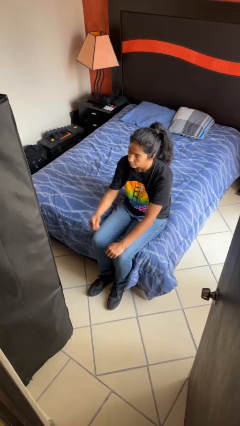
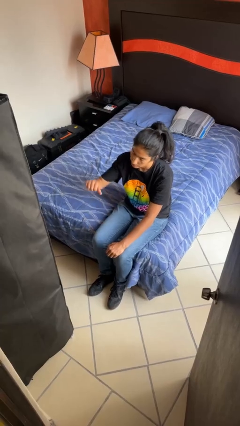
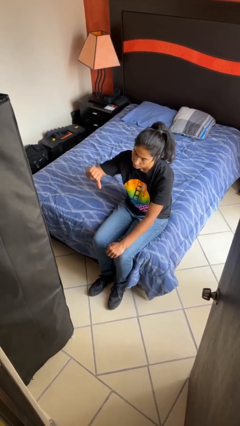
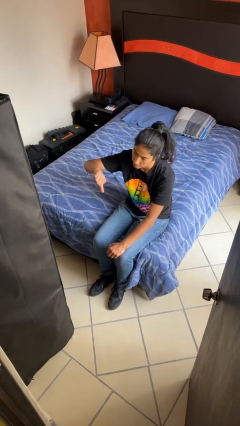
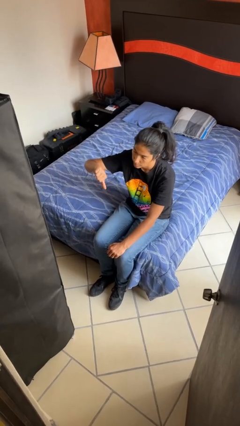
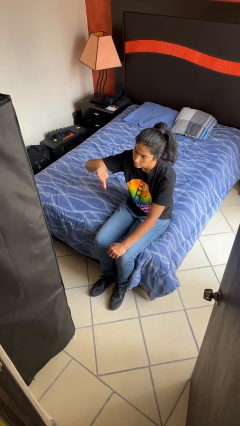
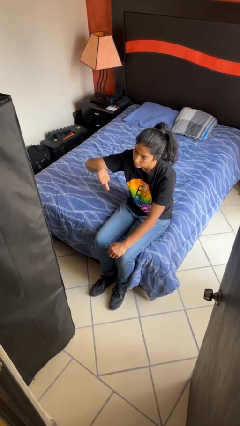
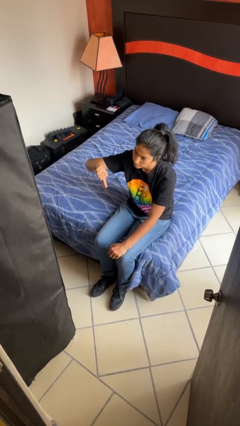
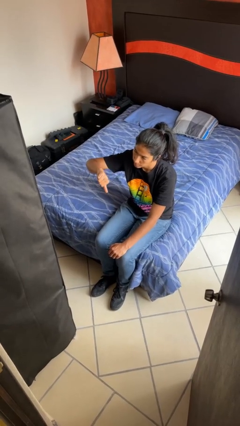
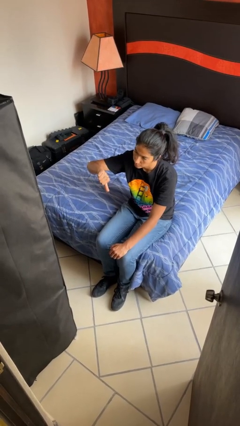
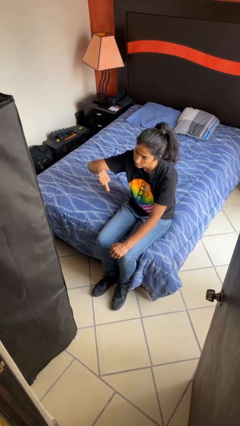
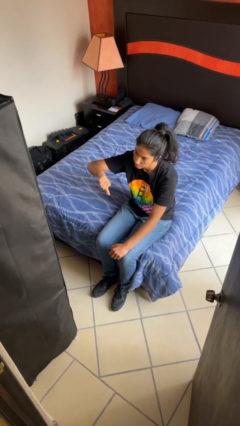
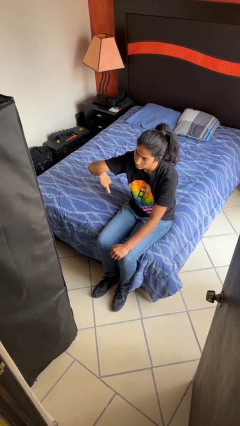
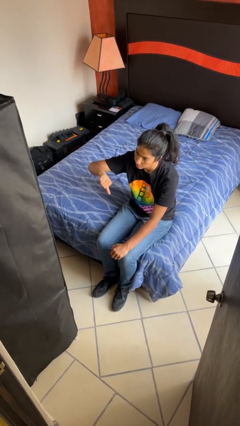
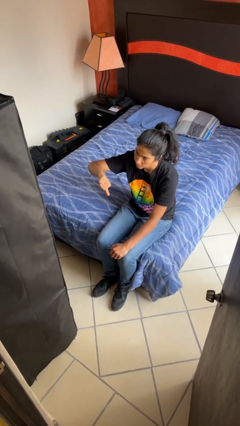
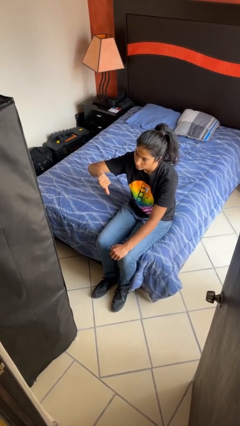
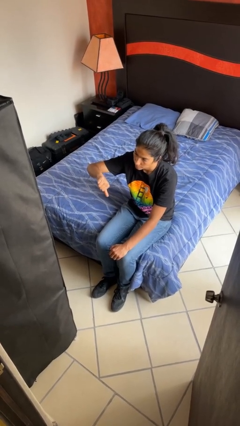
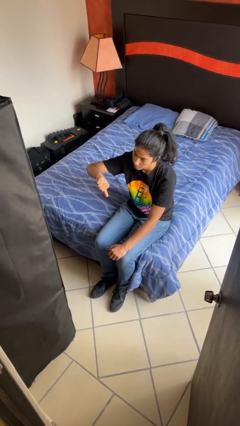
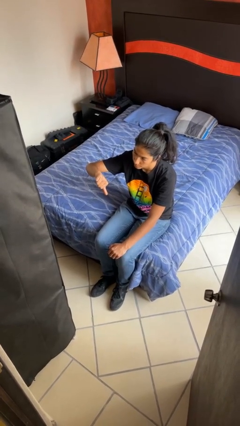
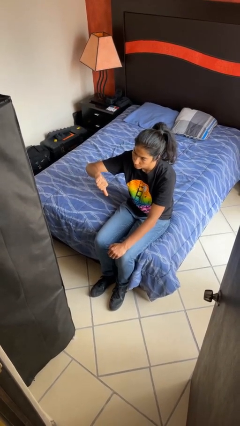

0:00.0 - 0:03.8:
person gestures thumbs down

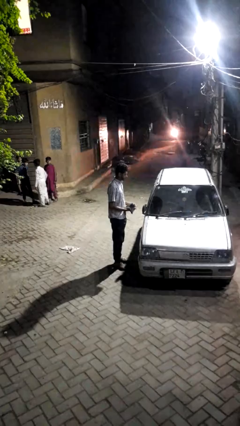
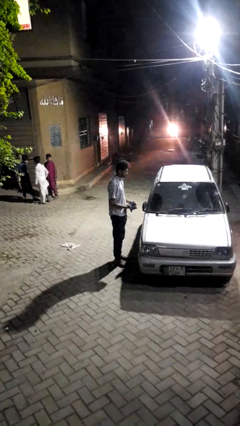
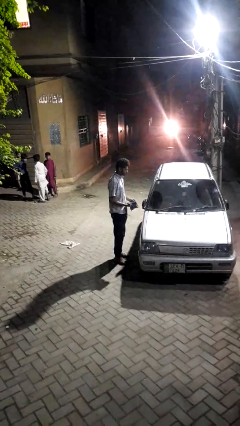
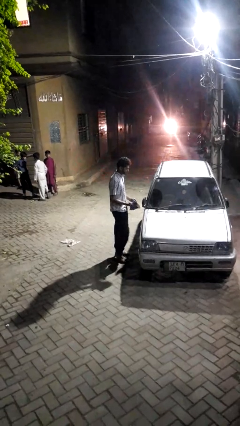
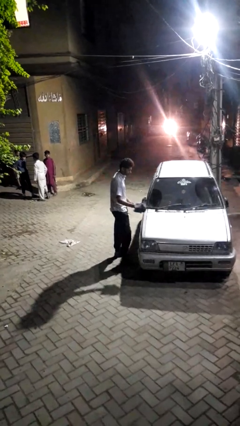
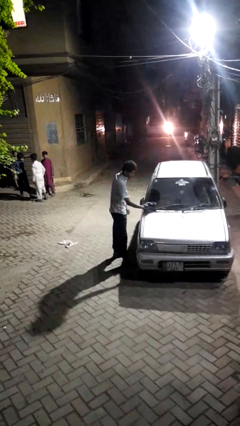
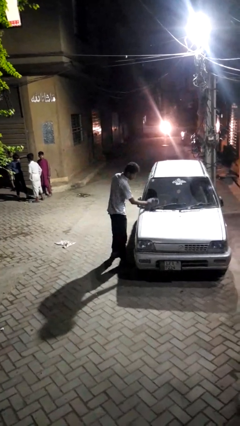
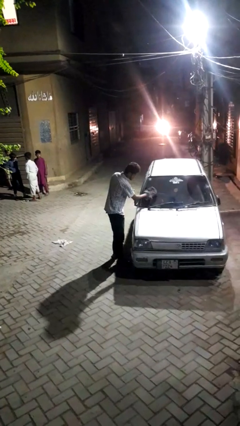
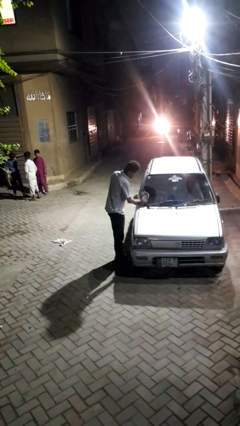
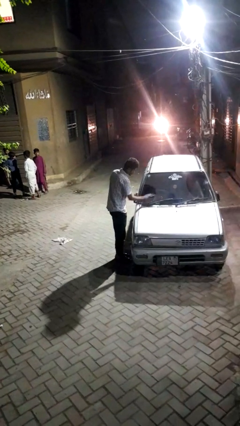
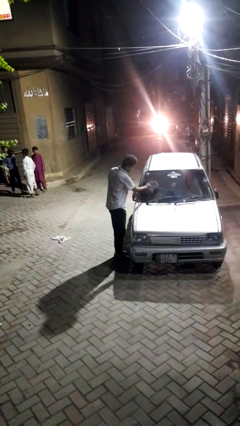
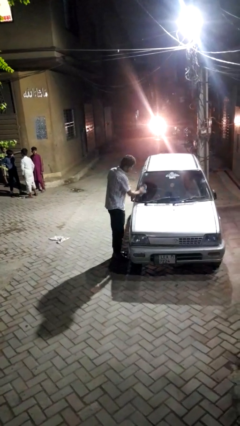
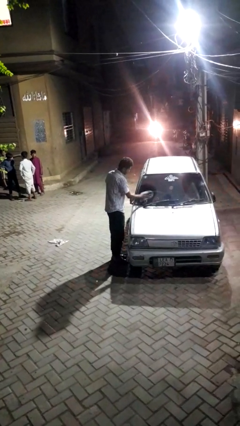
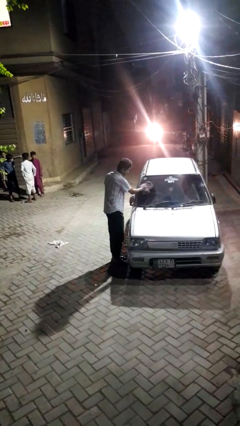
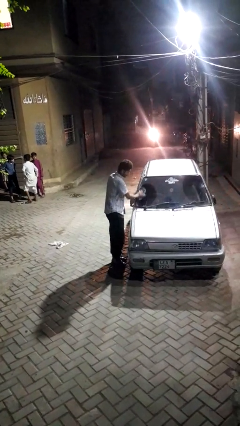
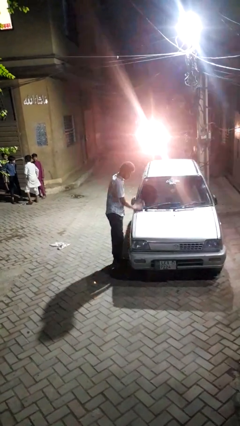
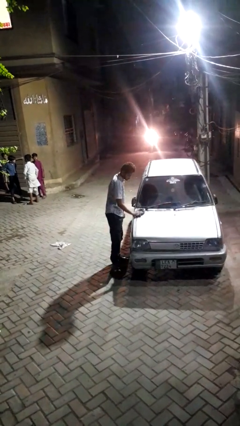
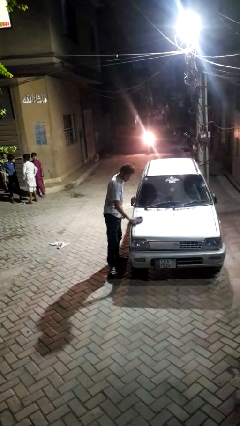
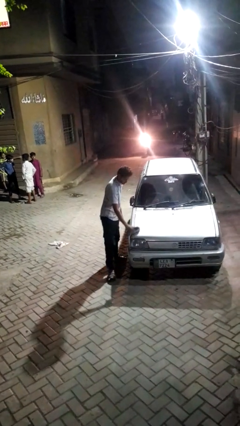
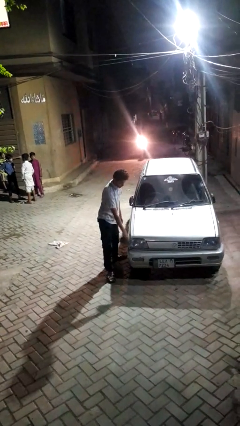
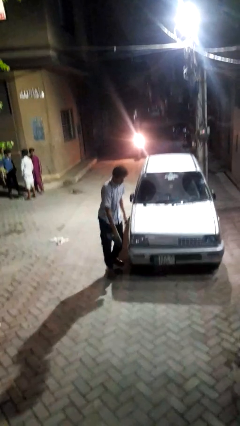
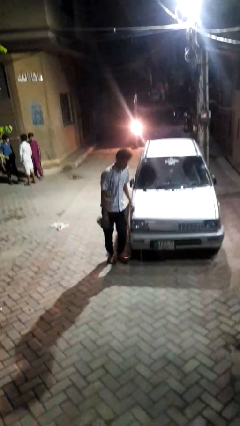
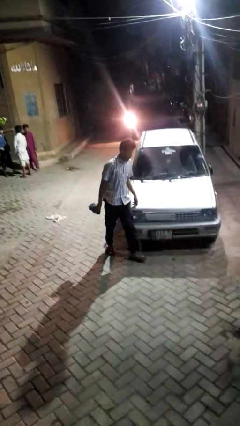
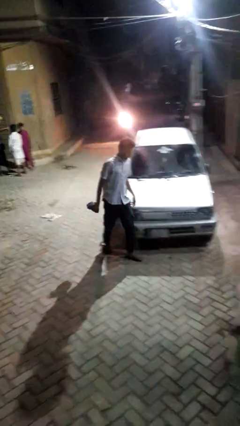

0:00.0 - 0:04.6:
person polishes car with rag

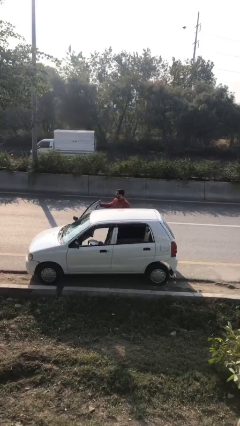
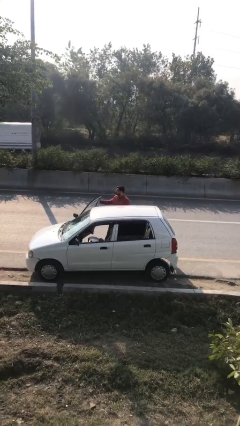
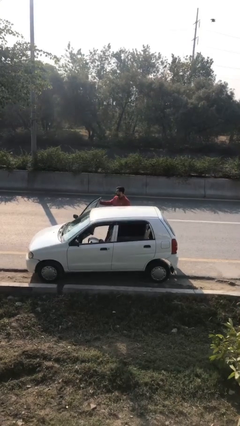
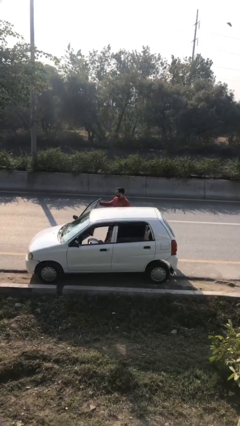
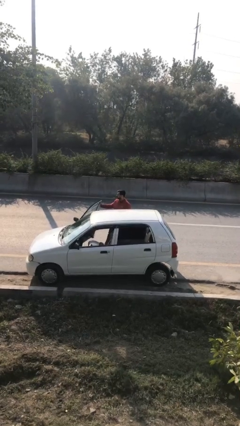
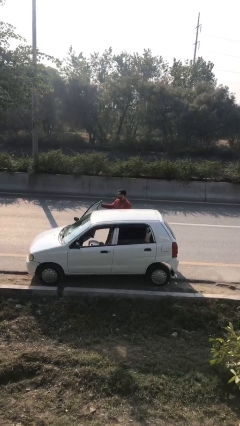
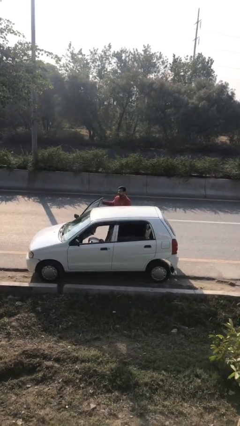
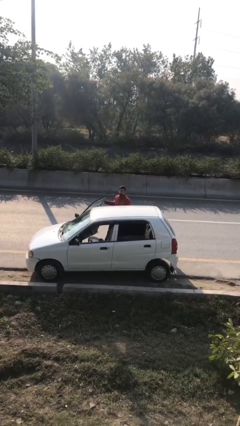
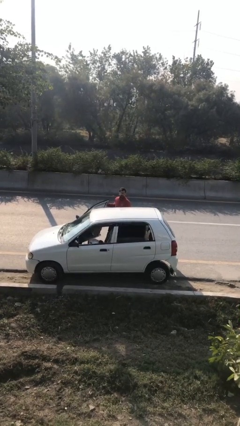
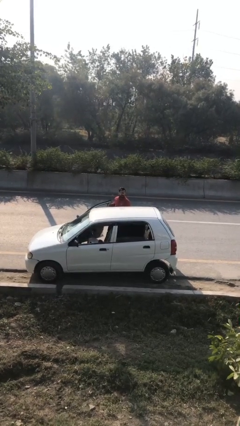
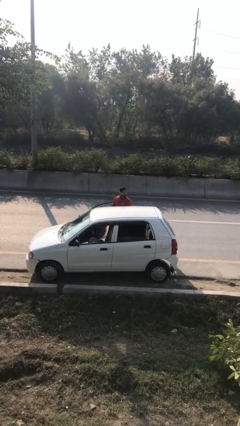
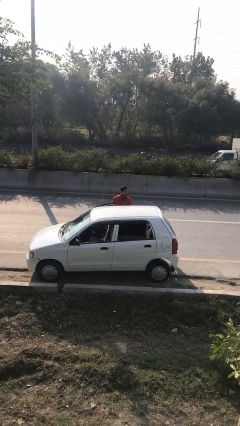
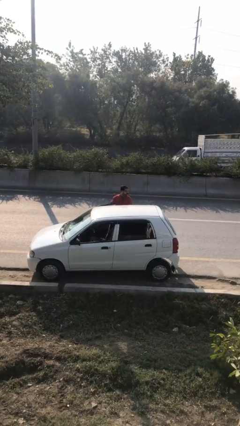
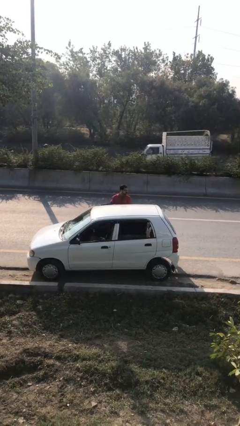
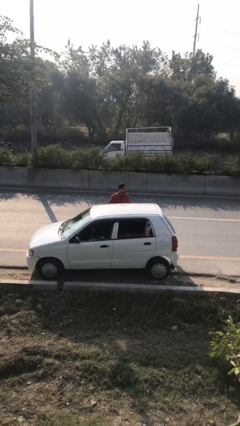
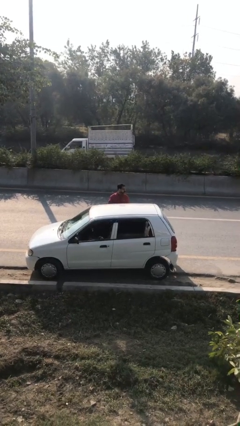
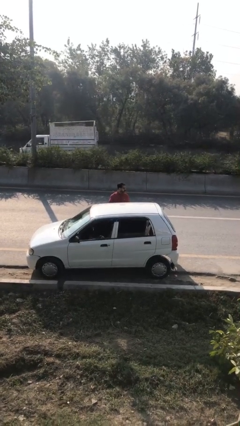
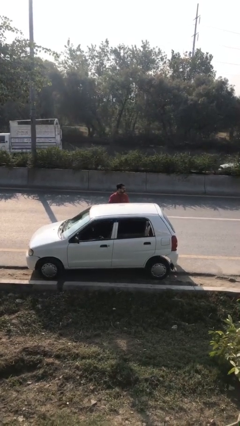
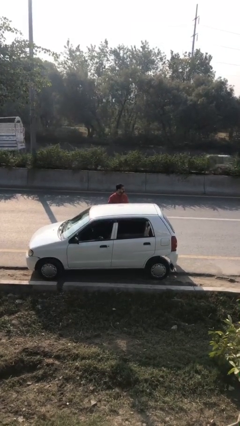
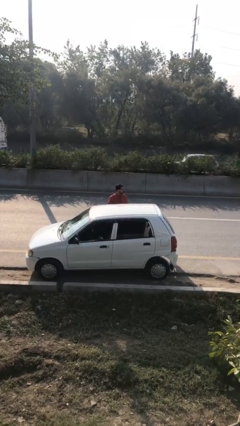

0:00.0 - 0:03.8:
person closes car door

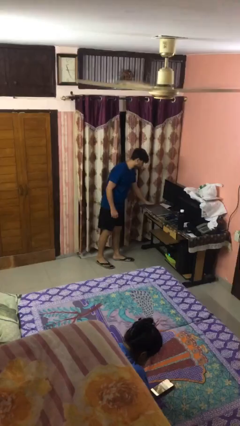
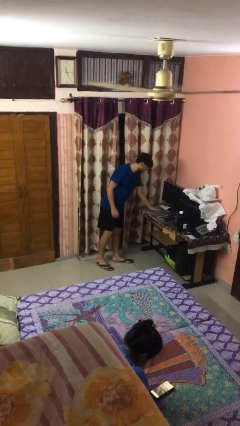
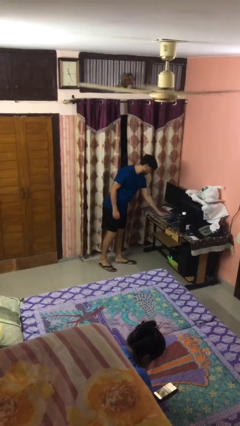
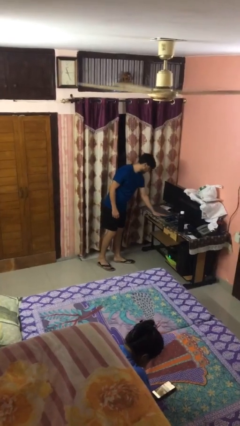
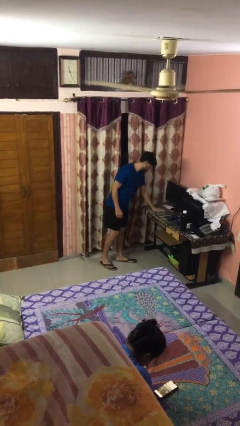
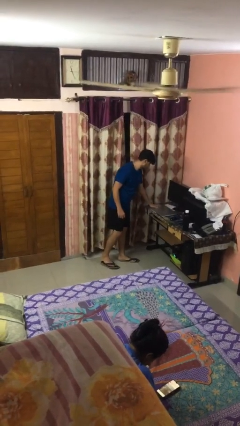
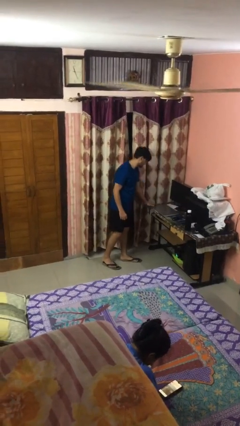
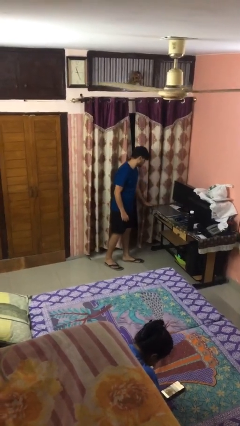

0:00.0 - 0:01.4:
person waves hand over object

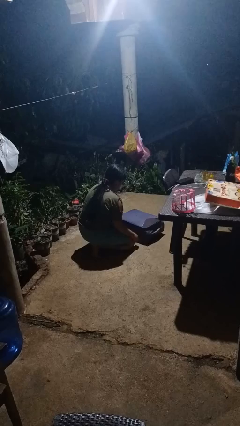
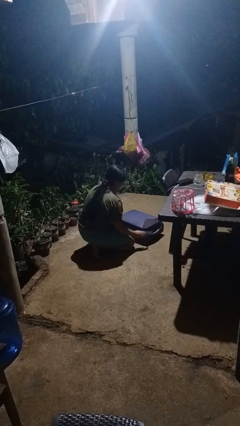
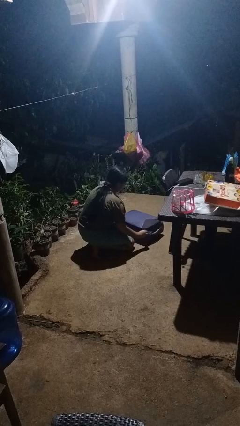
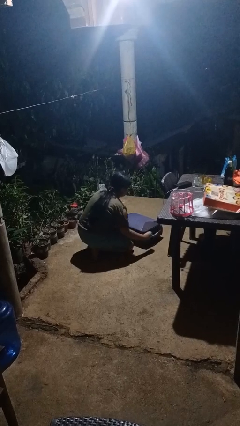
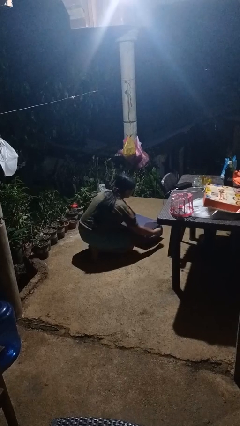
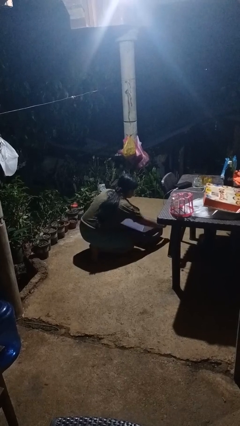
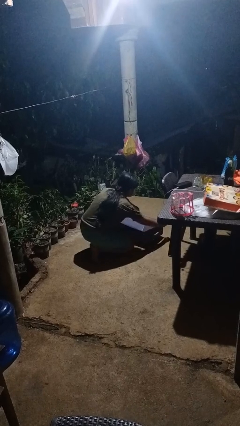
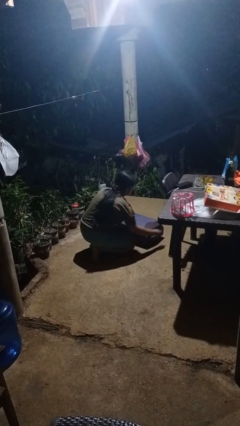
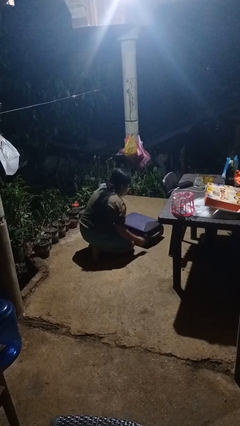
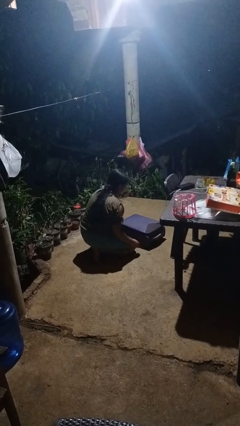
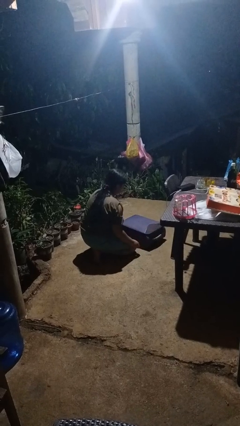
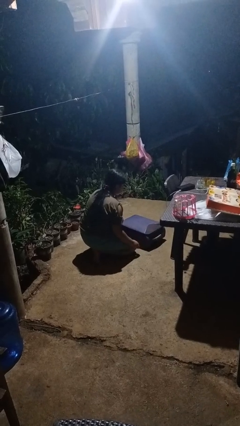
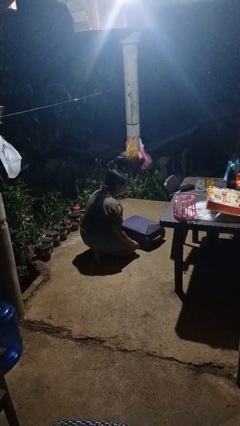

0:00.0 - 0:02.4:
person opens suitcase

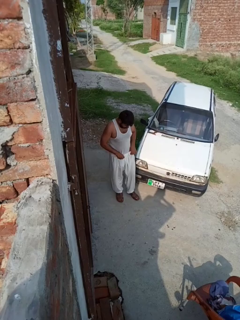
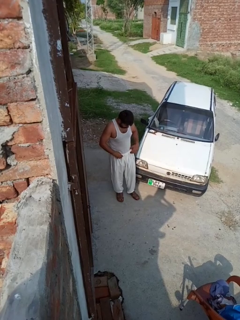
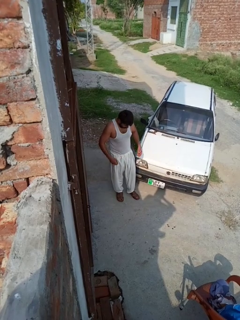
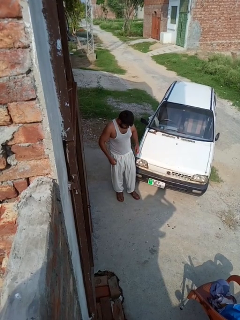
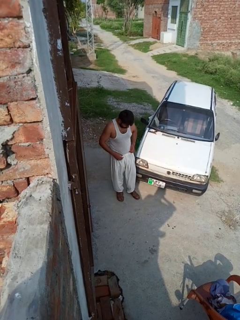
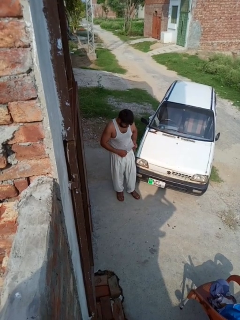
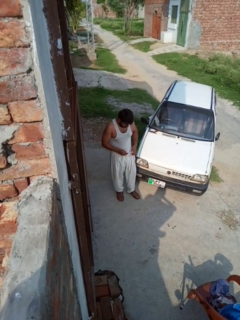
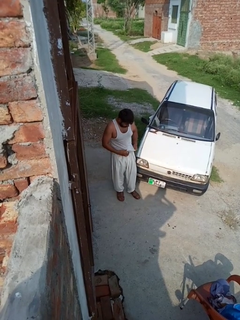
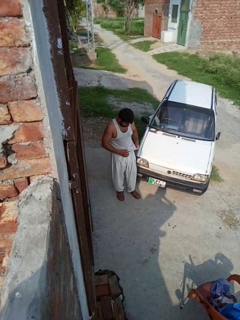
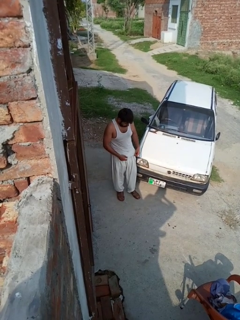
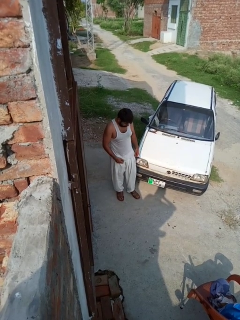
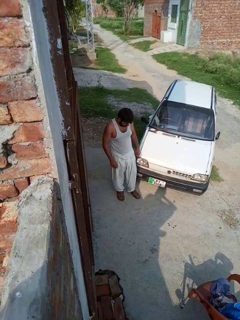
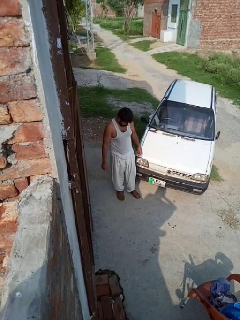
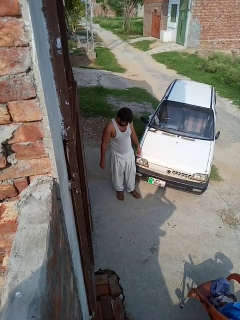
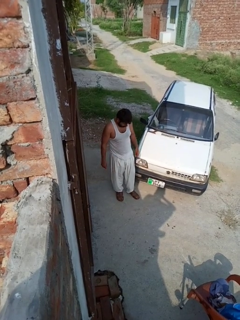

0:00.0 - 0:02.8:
person untucks shirt
